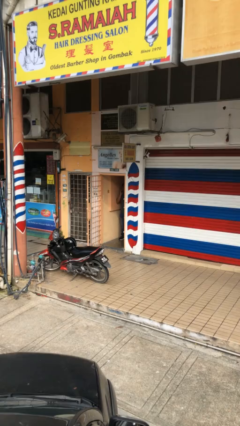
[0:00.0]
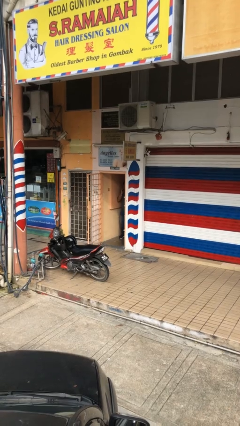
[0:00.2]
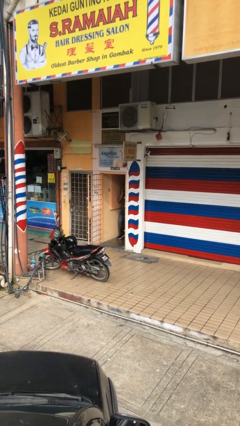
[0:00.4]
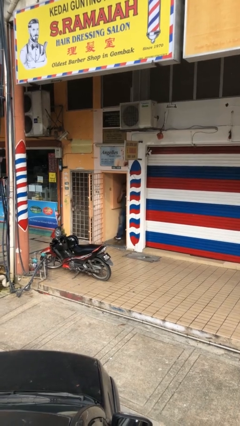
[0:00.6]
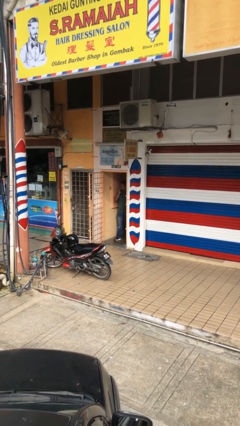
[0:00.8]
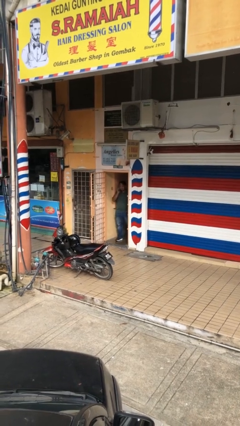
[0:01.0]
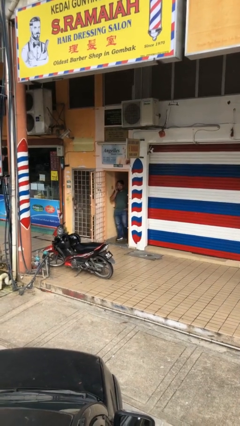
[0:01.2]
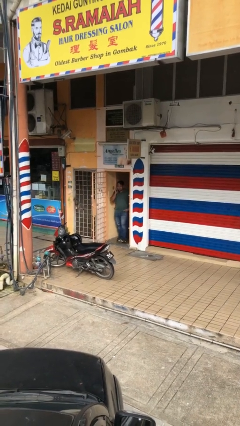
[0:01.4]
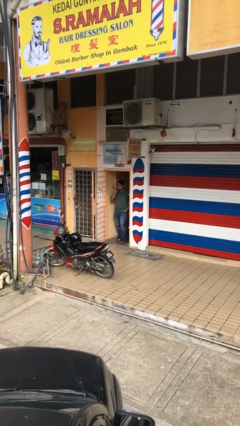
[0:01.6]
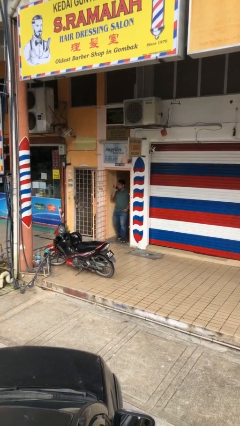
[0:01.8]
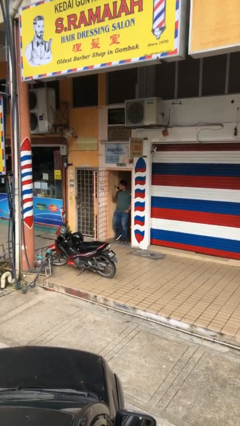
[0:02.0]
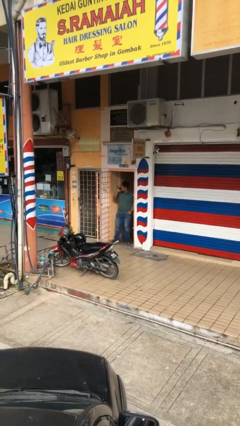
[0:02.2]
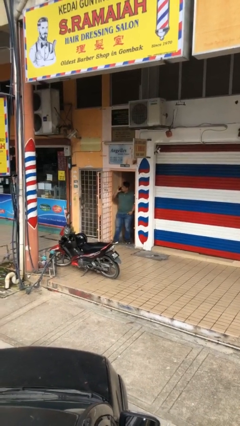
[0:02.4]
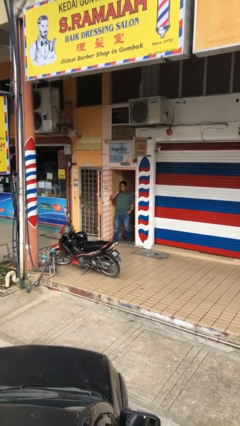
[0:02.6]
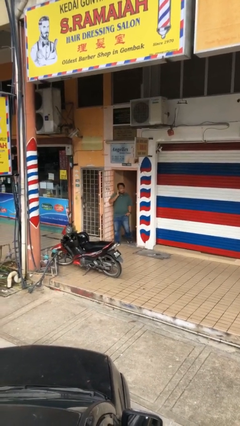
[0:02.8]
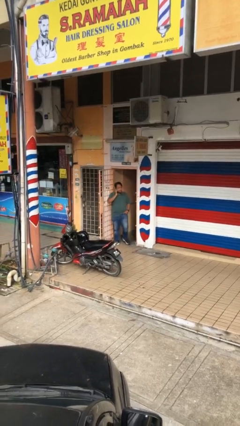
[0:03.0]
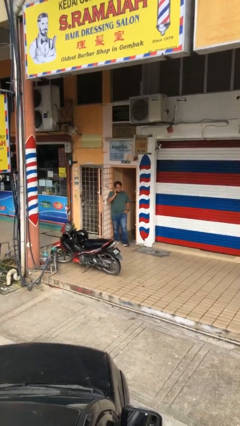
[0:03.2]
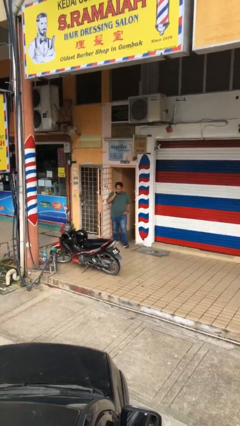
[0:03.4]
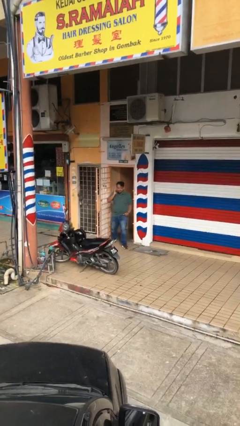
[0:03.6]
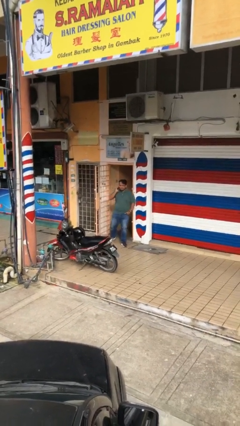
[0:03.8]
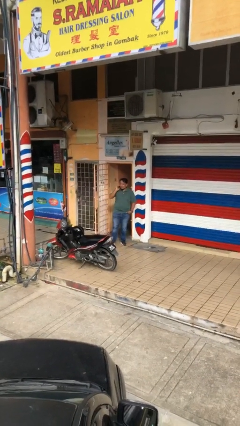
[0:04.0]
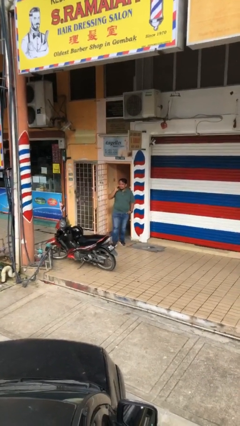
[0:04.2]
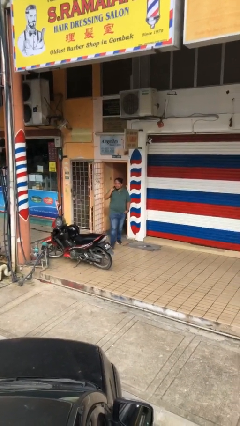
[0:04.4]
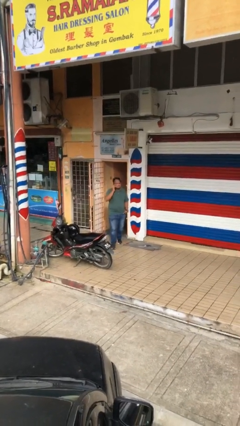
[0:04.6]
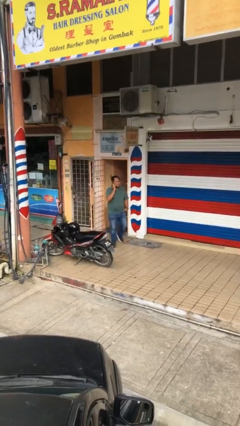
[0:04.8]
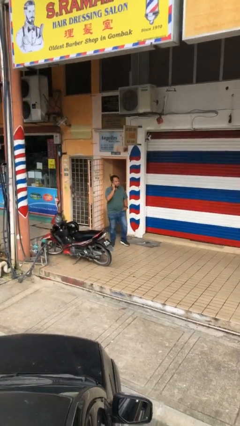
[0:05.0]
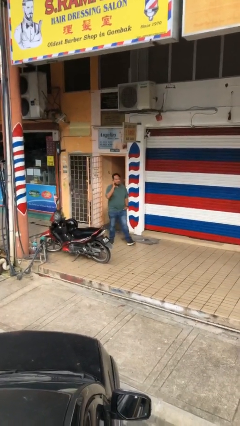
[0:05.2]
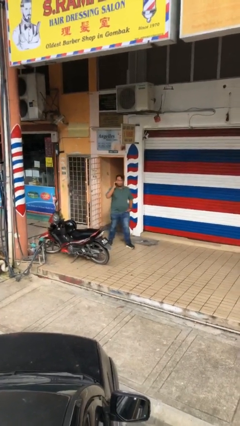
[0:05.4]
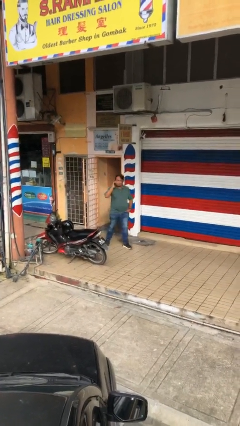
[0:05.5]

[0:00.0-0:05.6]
person enters scene through structure

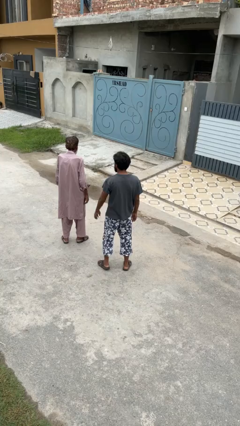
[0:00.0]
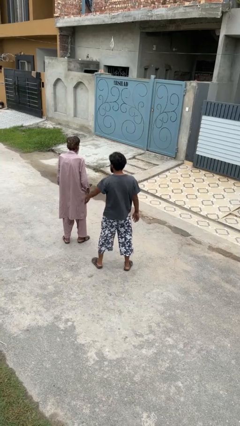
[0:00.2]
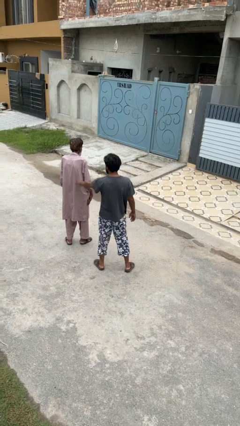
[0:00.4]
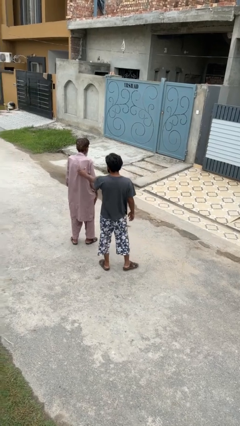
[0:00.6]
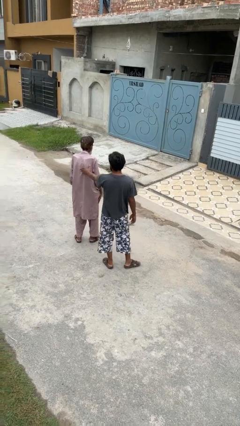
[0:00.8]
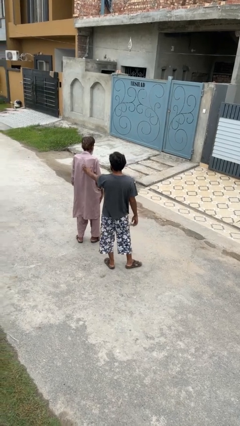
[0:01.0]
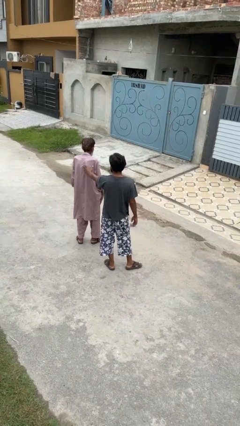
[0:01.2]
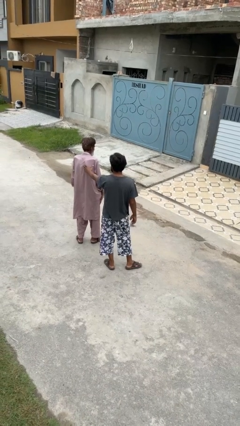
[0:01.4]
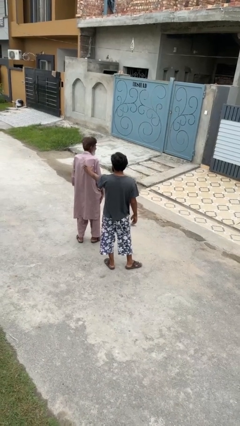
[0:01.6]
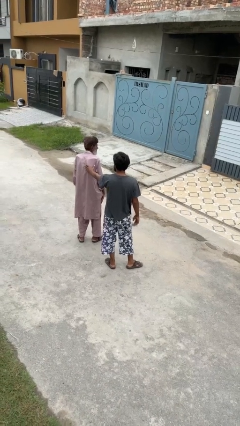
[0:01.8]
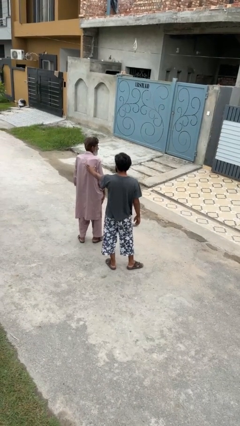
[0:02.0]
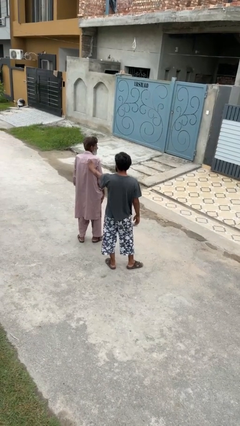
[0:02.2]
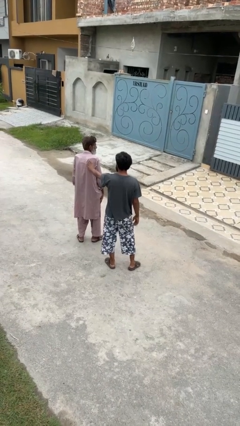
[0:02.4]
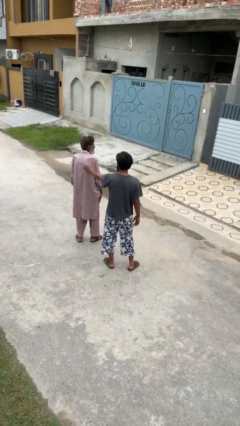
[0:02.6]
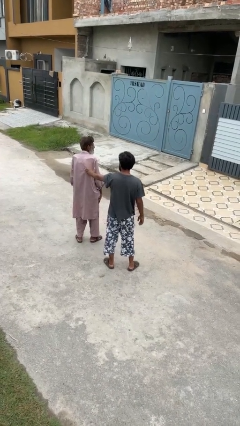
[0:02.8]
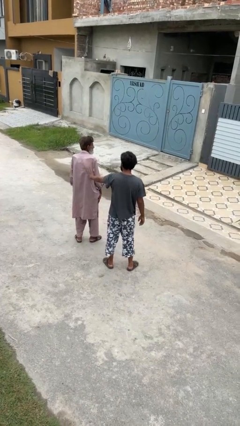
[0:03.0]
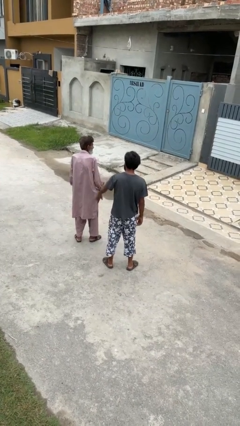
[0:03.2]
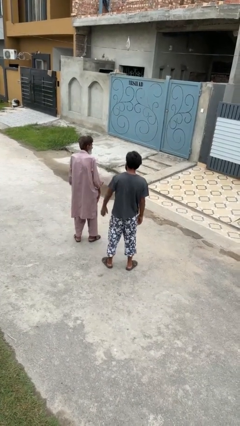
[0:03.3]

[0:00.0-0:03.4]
person touches back of person

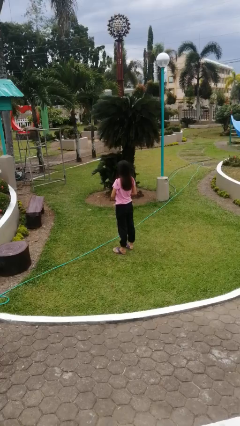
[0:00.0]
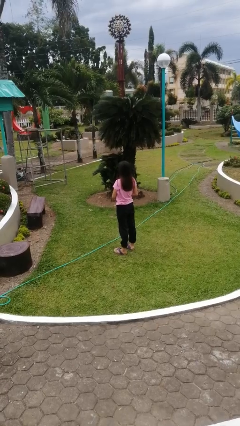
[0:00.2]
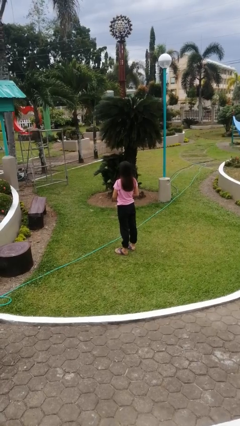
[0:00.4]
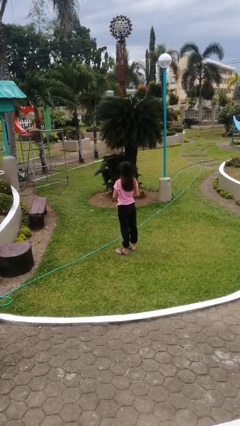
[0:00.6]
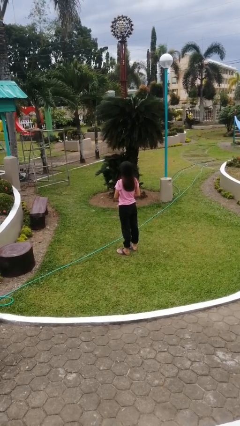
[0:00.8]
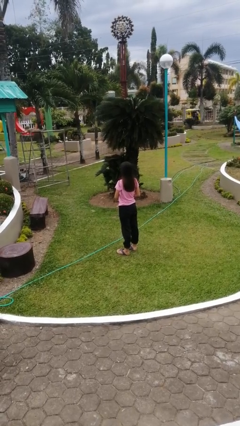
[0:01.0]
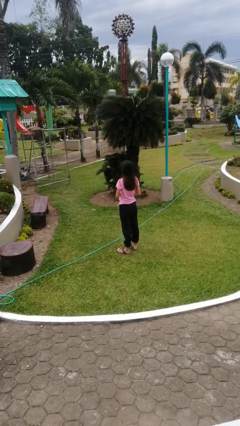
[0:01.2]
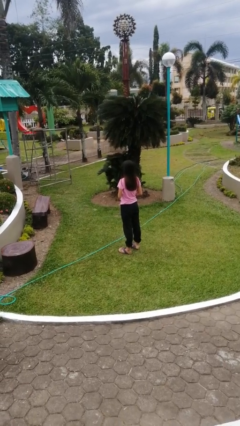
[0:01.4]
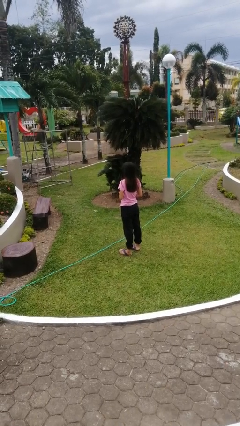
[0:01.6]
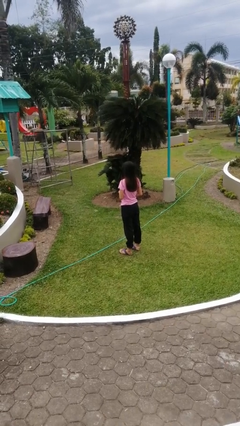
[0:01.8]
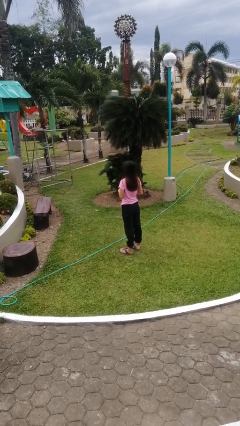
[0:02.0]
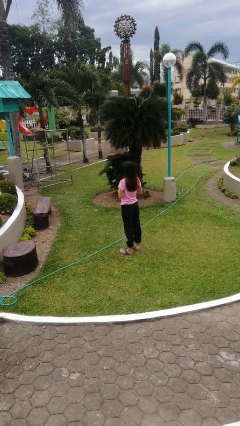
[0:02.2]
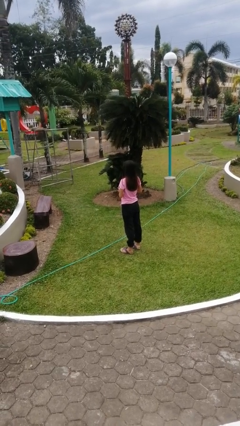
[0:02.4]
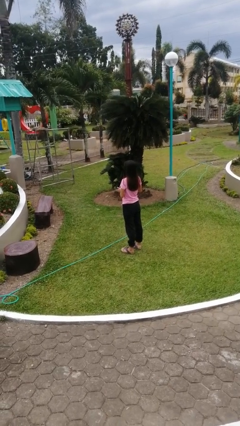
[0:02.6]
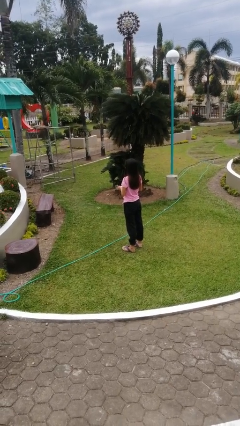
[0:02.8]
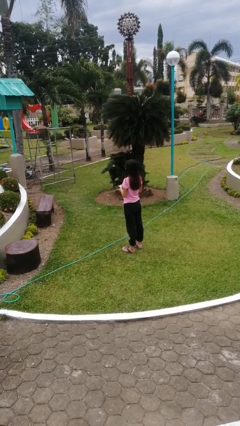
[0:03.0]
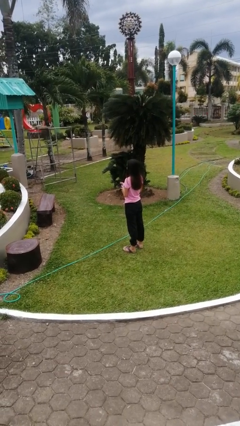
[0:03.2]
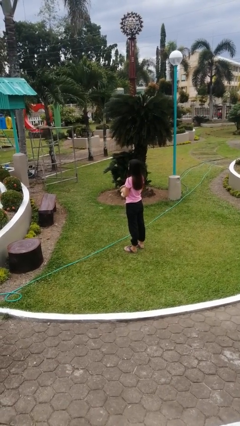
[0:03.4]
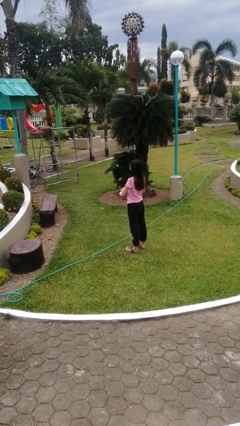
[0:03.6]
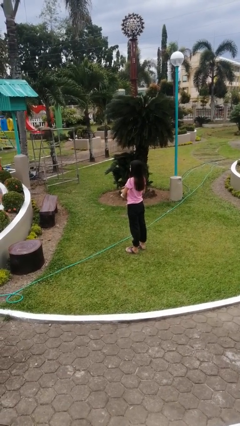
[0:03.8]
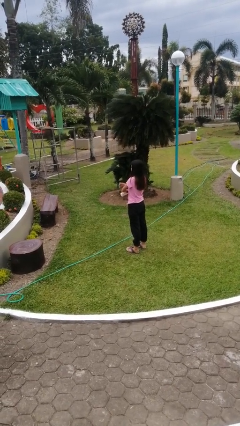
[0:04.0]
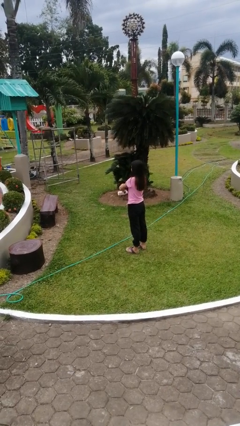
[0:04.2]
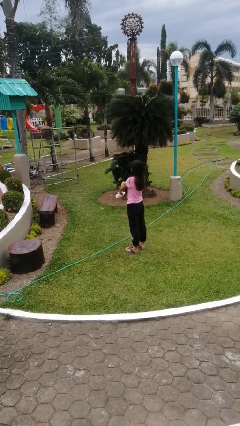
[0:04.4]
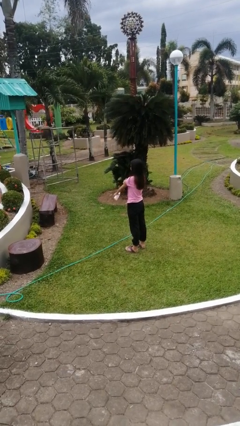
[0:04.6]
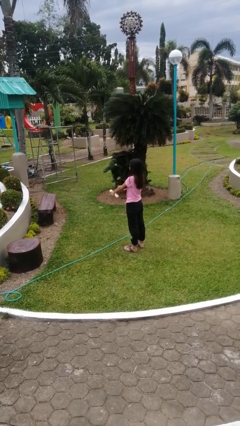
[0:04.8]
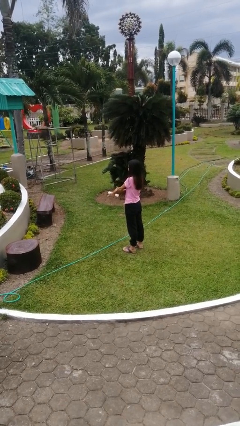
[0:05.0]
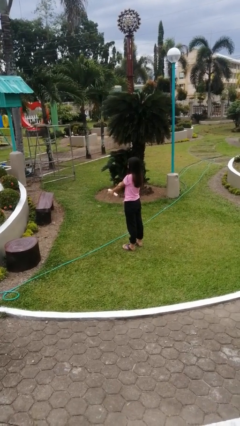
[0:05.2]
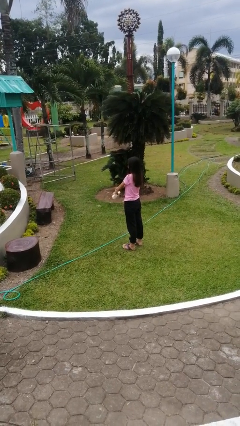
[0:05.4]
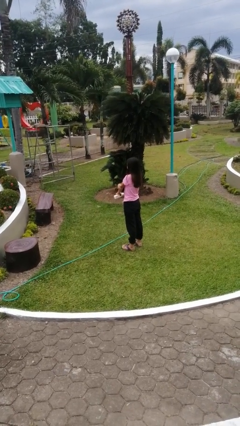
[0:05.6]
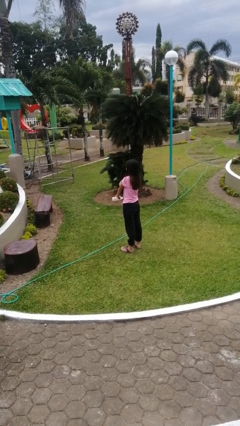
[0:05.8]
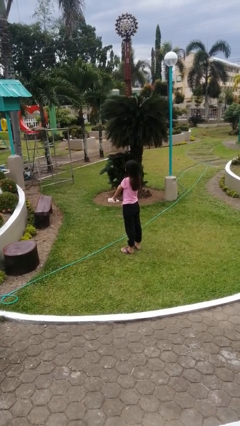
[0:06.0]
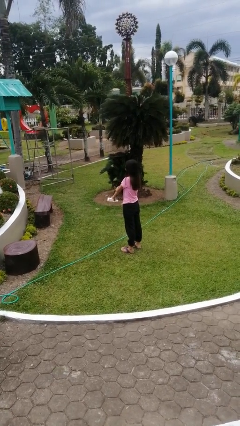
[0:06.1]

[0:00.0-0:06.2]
person applies sunscreen

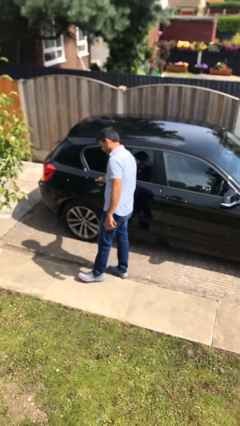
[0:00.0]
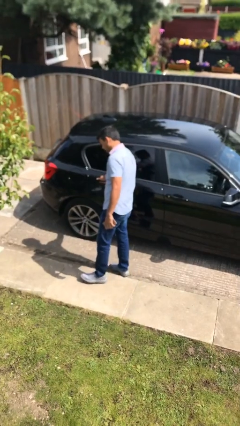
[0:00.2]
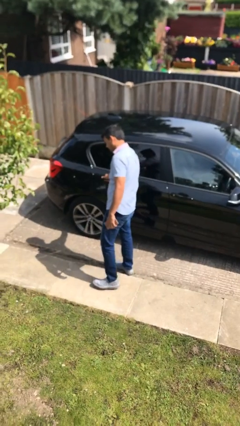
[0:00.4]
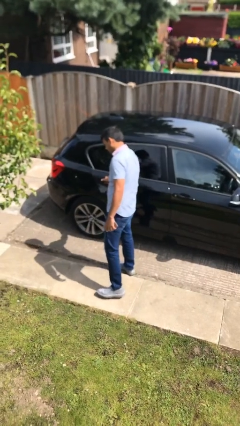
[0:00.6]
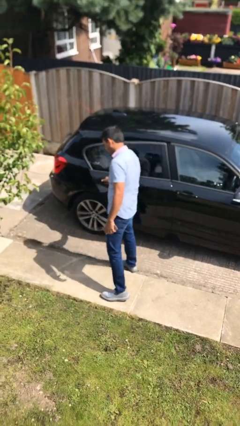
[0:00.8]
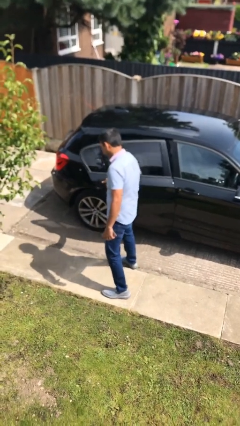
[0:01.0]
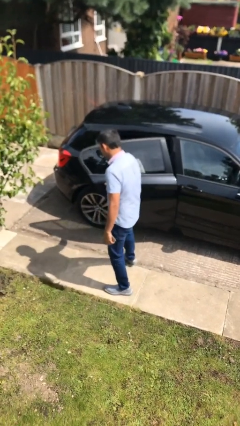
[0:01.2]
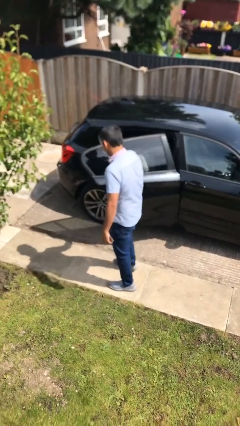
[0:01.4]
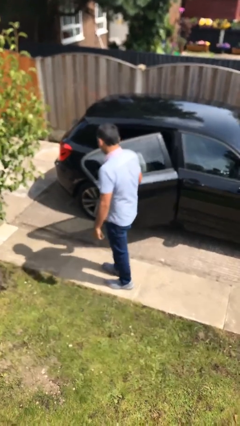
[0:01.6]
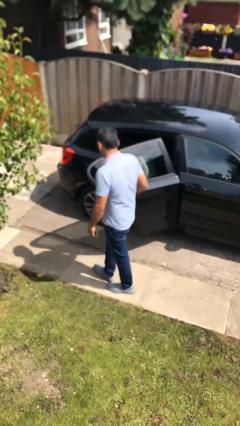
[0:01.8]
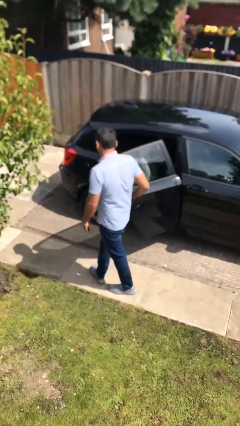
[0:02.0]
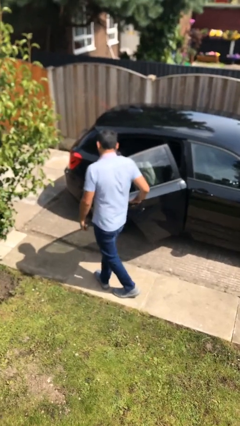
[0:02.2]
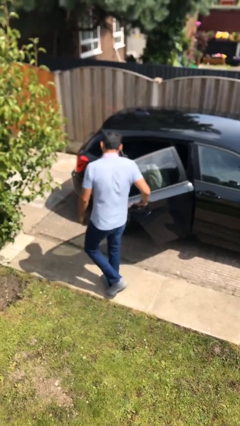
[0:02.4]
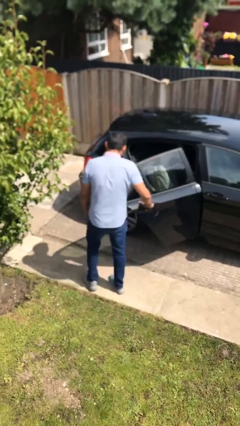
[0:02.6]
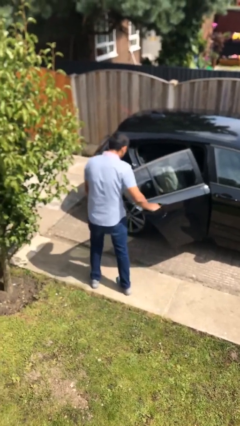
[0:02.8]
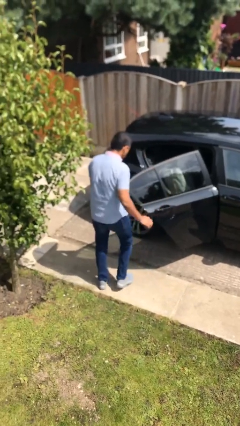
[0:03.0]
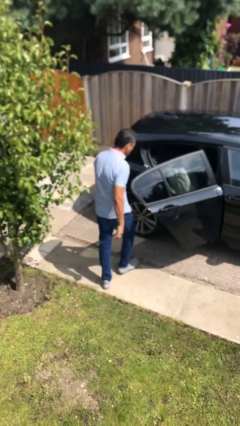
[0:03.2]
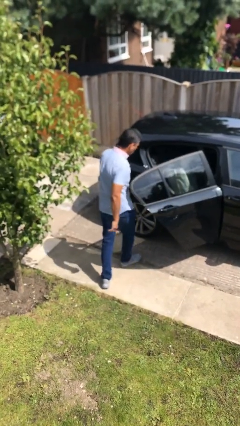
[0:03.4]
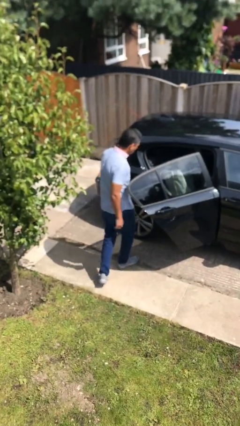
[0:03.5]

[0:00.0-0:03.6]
person opens car door
